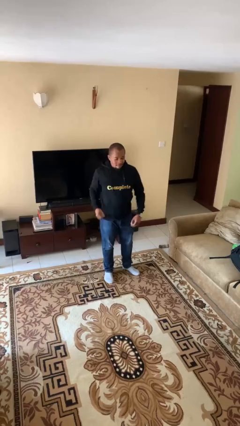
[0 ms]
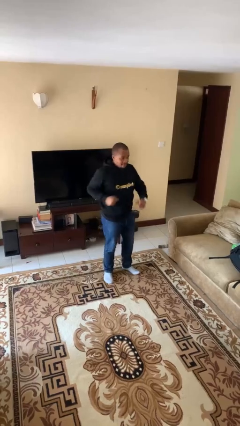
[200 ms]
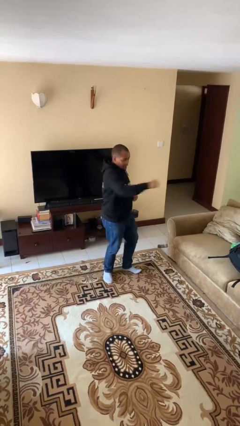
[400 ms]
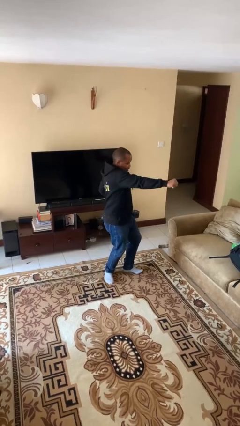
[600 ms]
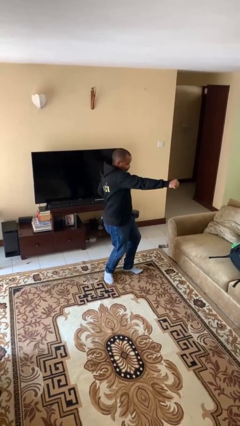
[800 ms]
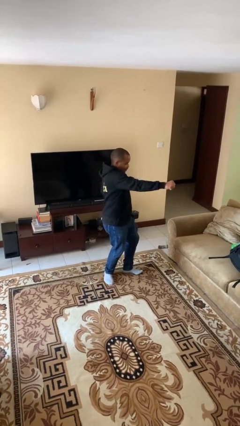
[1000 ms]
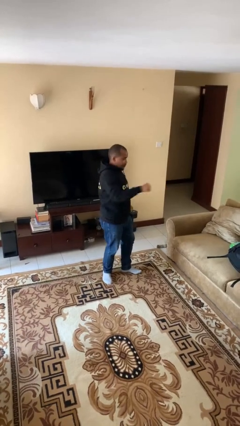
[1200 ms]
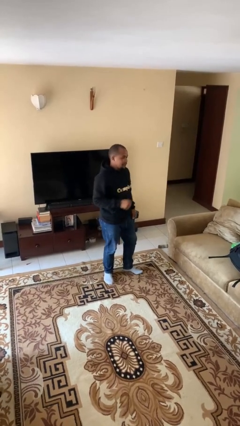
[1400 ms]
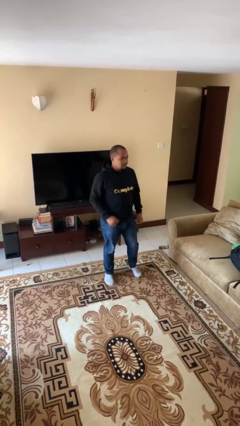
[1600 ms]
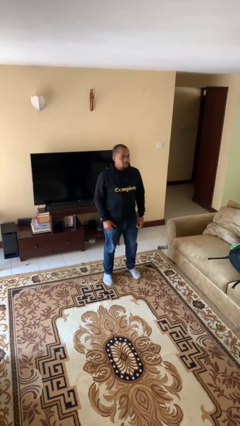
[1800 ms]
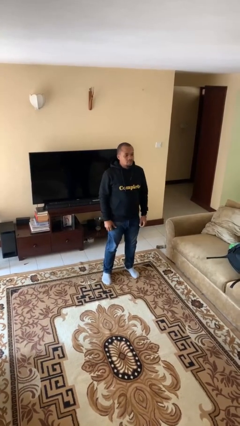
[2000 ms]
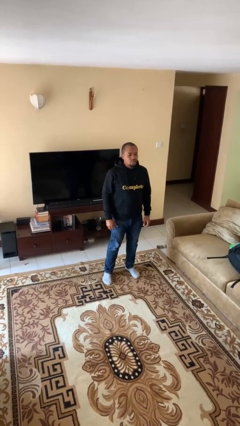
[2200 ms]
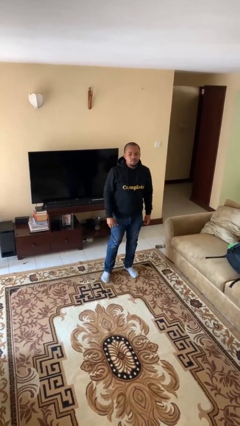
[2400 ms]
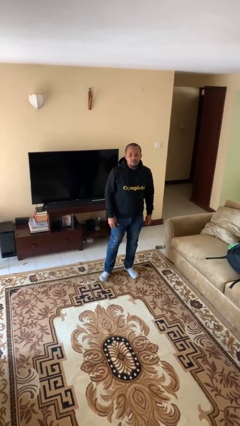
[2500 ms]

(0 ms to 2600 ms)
person punches

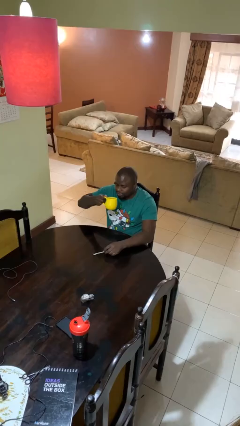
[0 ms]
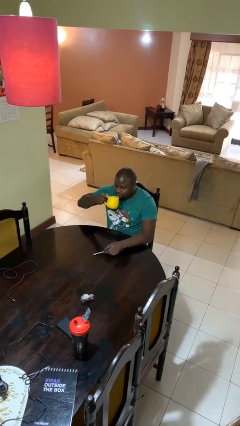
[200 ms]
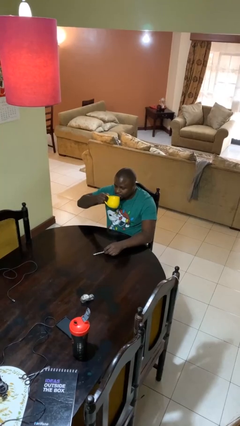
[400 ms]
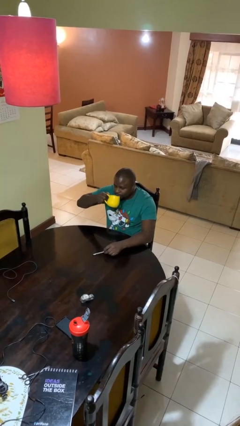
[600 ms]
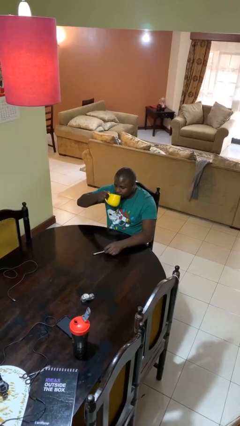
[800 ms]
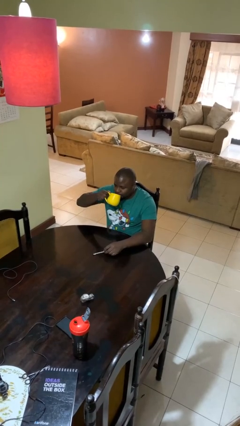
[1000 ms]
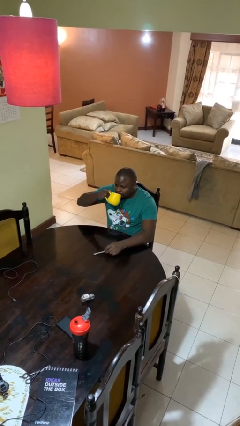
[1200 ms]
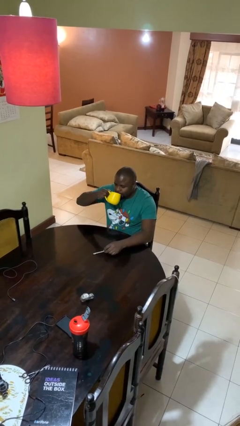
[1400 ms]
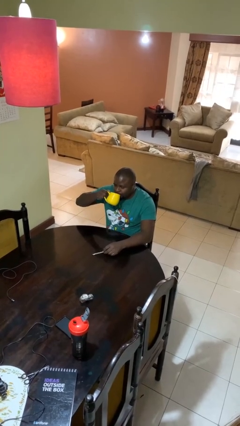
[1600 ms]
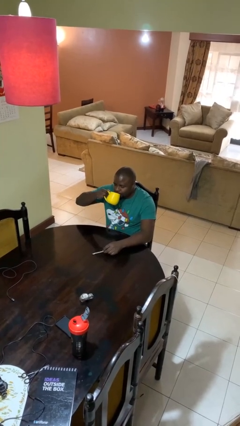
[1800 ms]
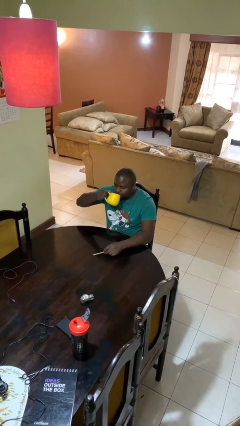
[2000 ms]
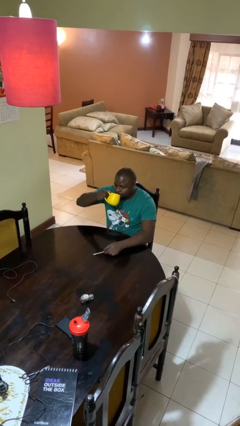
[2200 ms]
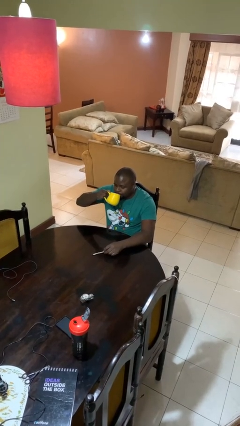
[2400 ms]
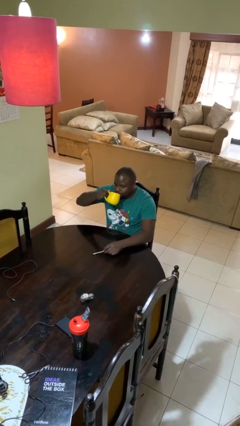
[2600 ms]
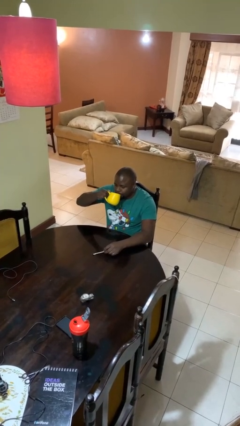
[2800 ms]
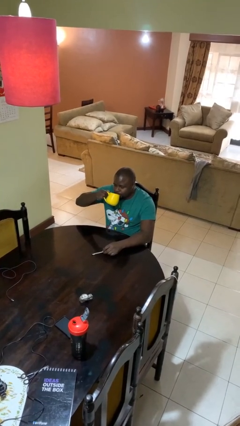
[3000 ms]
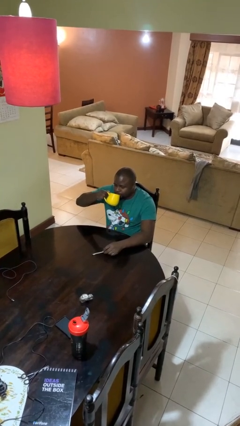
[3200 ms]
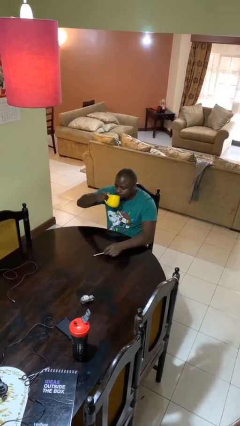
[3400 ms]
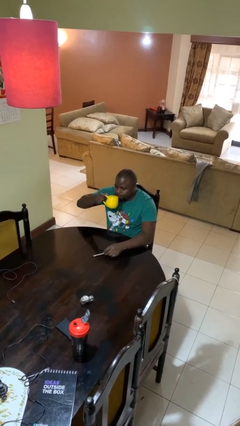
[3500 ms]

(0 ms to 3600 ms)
person drinks from mug

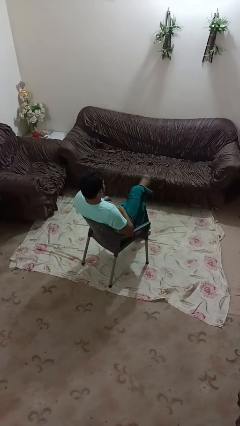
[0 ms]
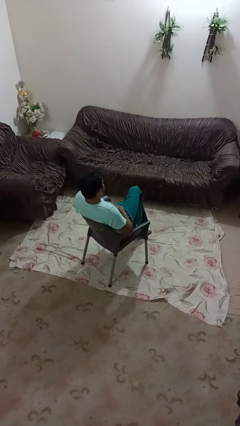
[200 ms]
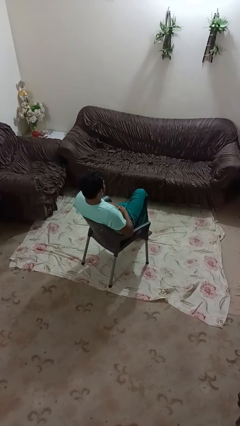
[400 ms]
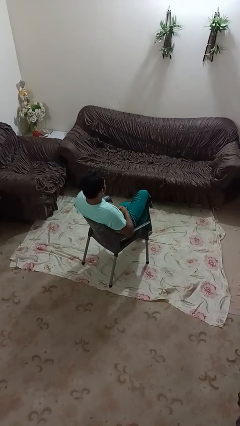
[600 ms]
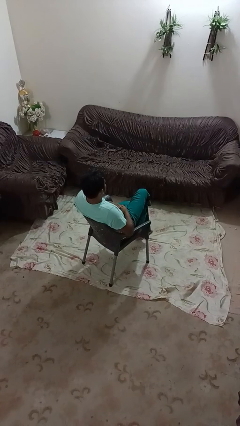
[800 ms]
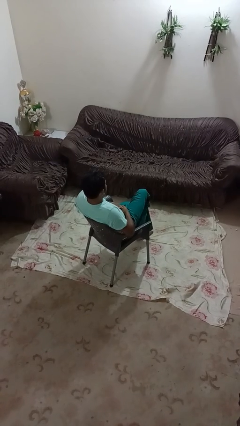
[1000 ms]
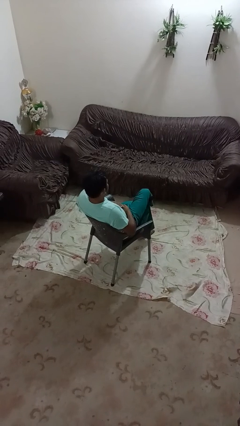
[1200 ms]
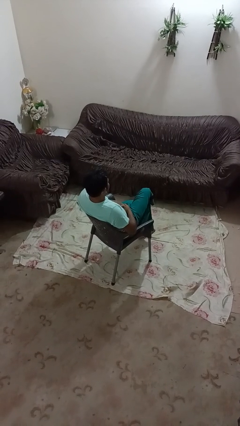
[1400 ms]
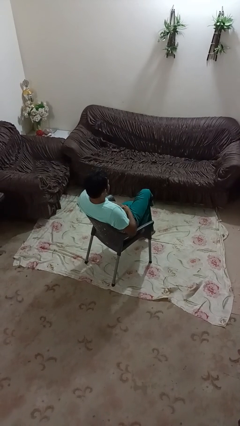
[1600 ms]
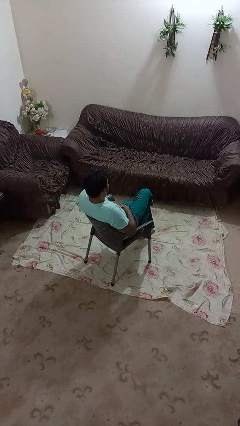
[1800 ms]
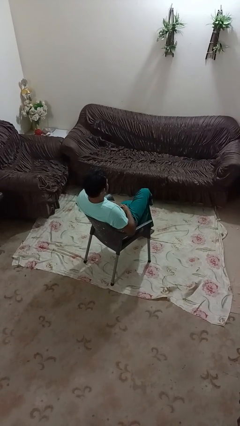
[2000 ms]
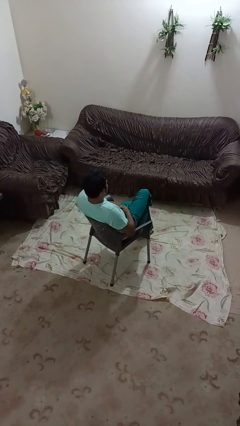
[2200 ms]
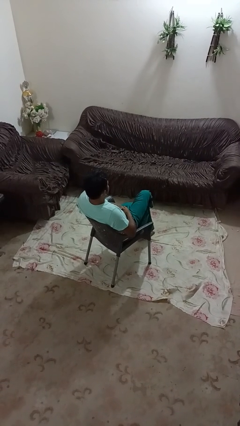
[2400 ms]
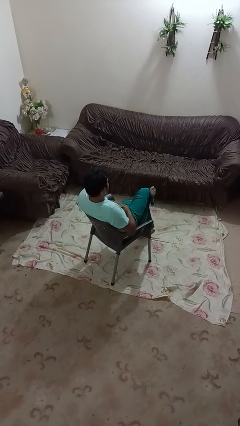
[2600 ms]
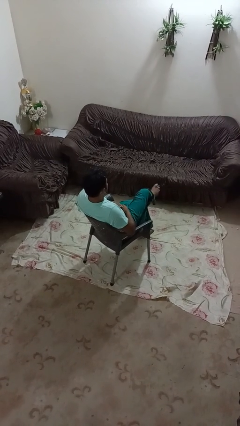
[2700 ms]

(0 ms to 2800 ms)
person crosses legs

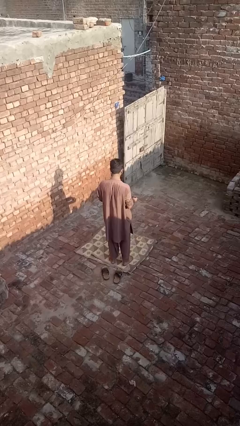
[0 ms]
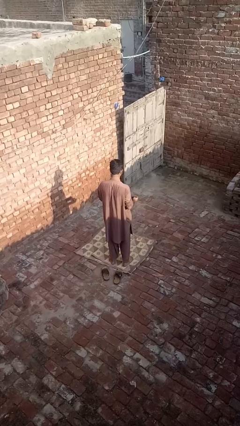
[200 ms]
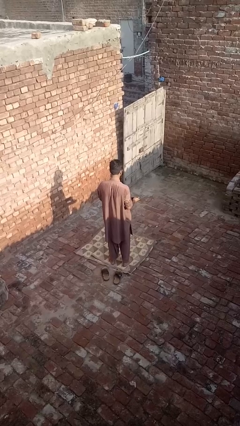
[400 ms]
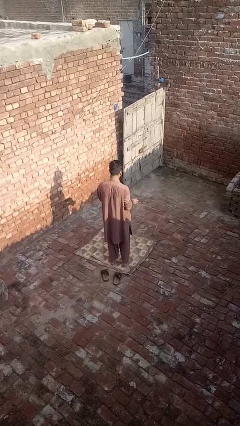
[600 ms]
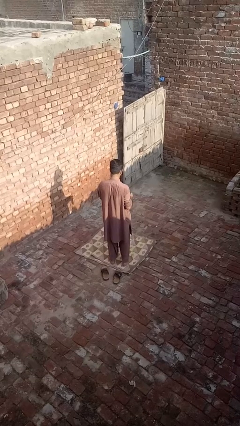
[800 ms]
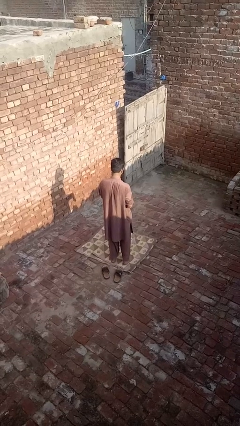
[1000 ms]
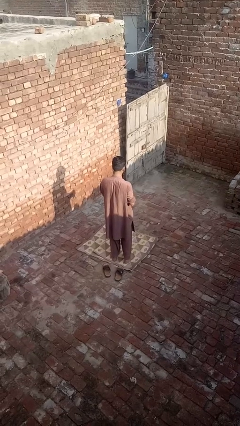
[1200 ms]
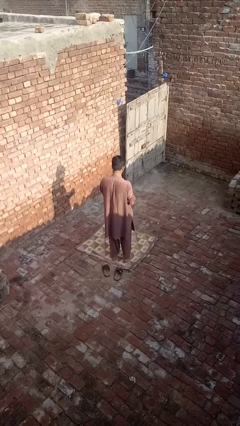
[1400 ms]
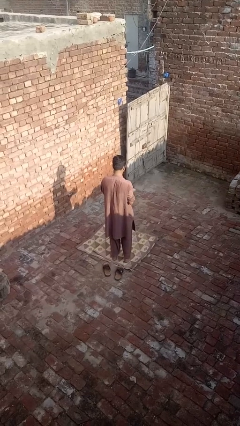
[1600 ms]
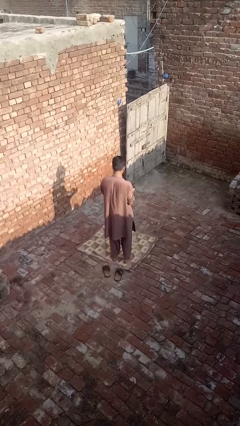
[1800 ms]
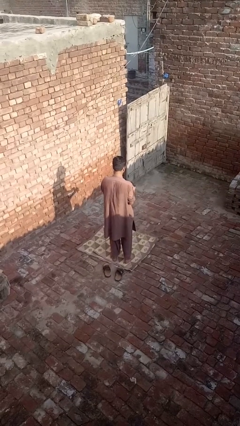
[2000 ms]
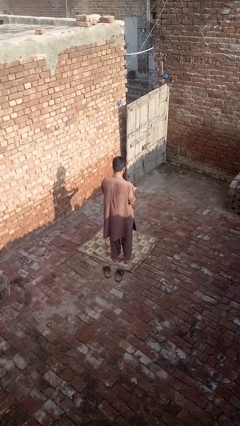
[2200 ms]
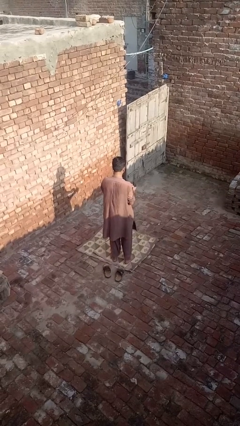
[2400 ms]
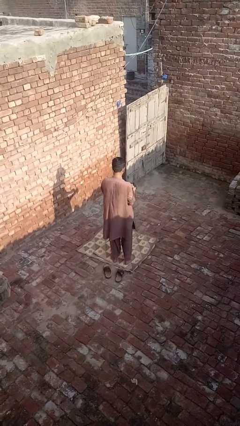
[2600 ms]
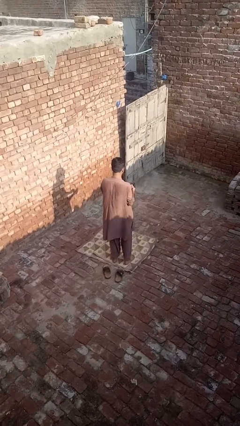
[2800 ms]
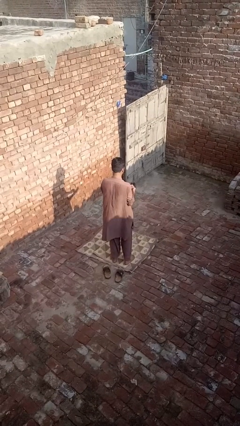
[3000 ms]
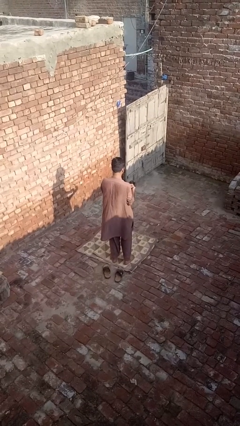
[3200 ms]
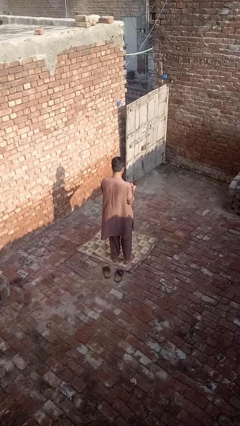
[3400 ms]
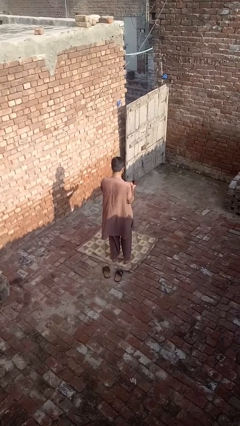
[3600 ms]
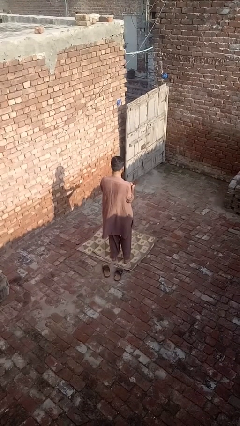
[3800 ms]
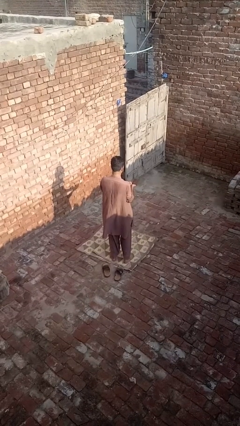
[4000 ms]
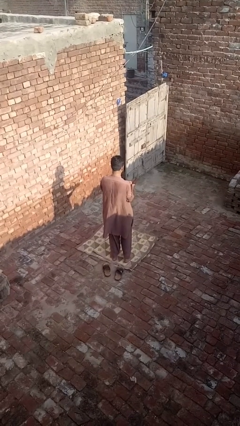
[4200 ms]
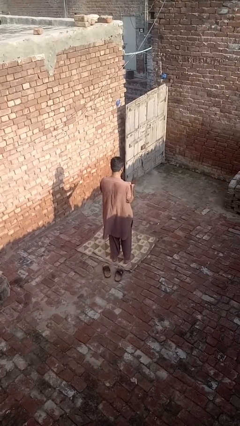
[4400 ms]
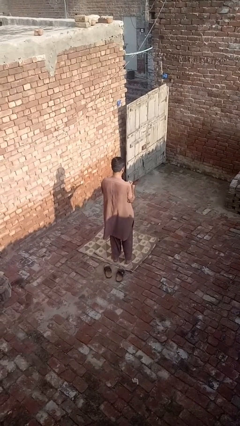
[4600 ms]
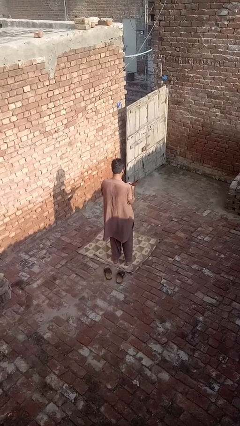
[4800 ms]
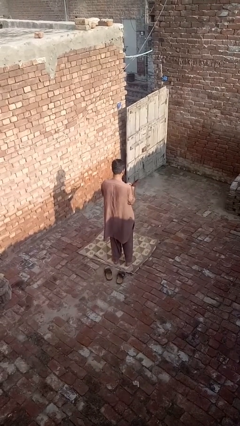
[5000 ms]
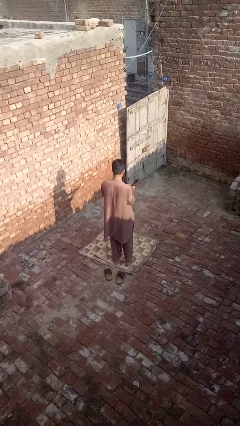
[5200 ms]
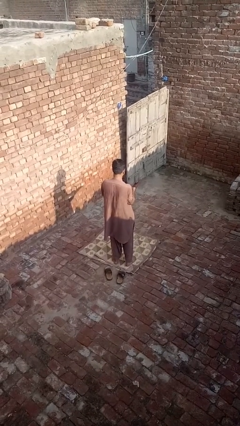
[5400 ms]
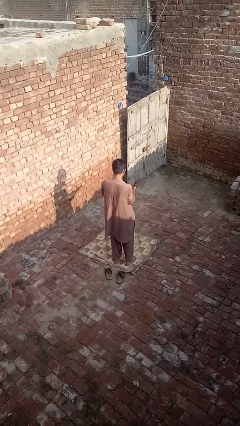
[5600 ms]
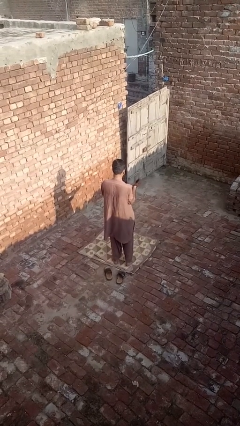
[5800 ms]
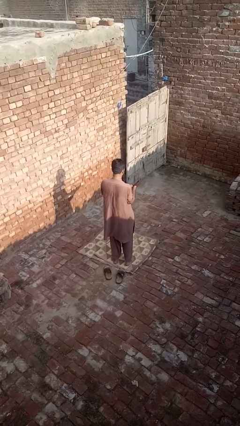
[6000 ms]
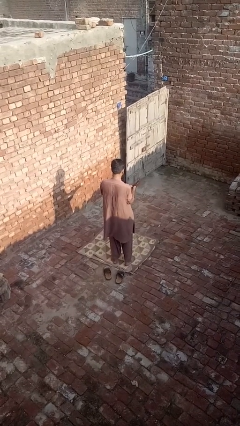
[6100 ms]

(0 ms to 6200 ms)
person puts on gloves

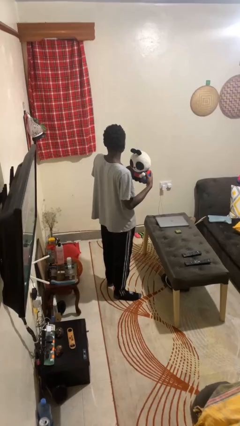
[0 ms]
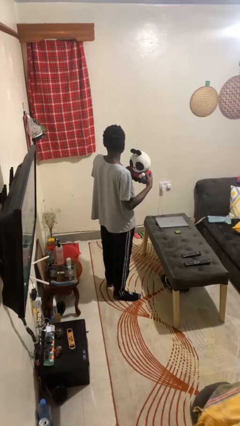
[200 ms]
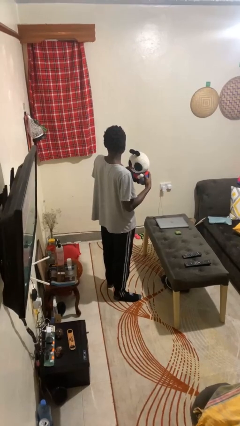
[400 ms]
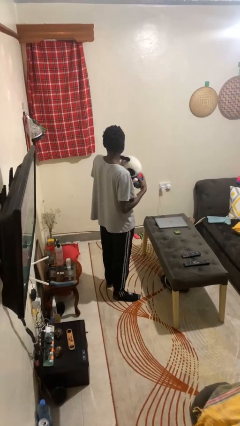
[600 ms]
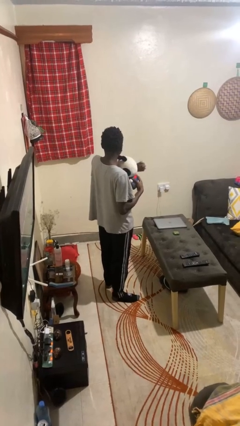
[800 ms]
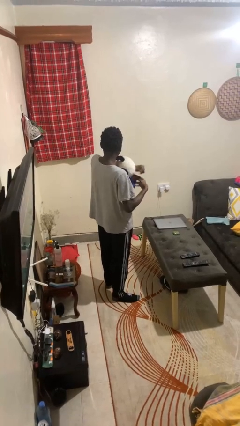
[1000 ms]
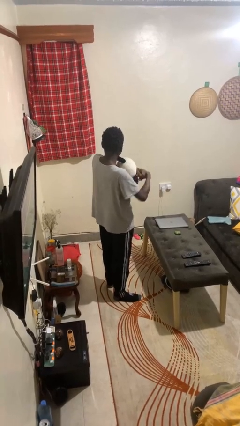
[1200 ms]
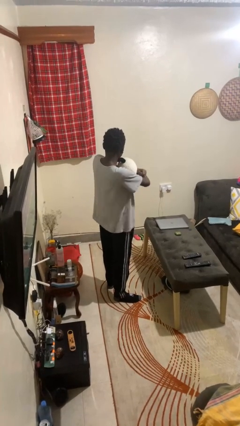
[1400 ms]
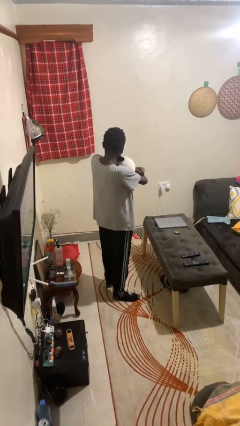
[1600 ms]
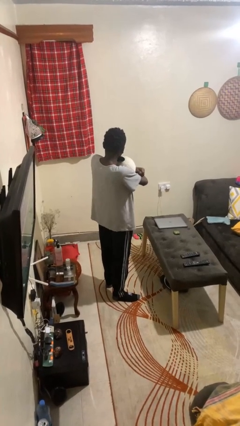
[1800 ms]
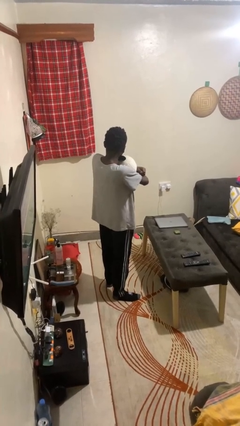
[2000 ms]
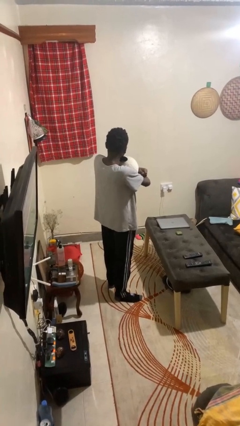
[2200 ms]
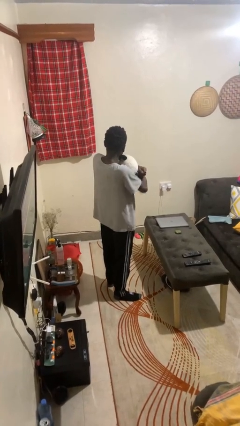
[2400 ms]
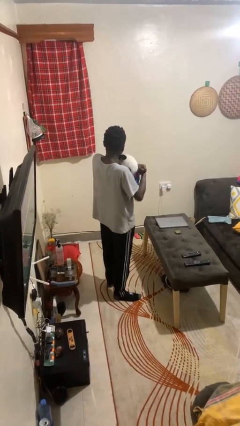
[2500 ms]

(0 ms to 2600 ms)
person hugs stuffed animal

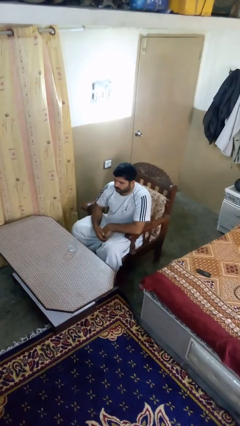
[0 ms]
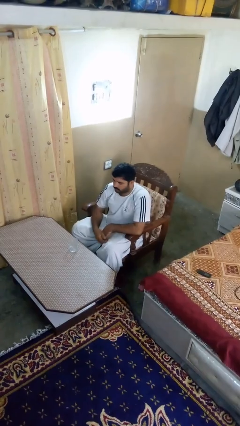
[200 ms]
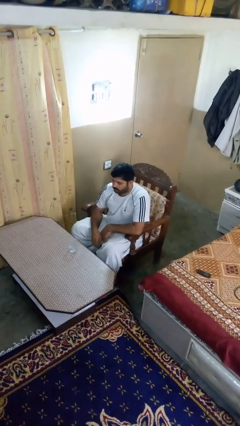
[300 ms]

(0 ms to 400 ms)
person puts down object on table
